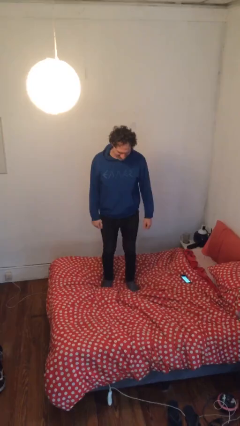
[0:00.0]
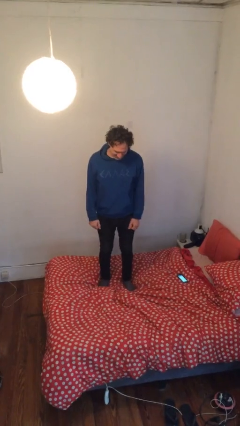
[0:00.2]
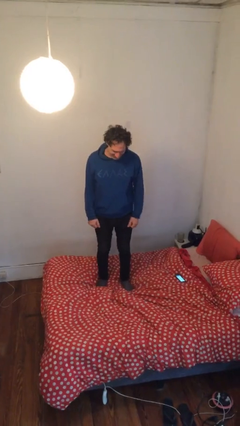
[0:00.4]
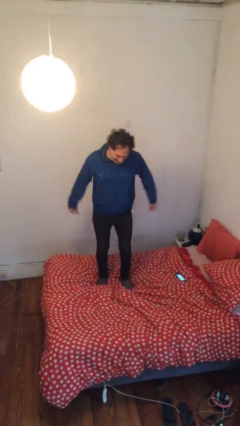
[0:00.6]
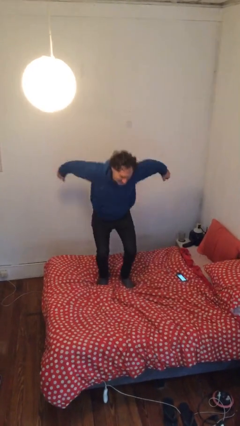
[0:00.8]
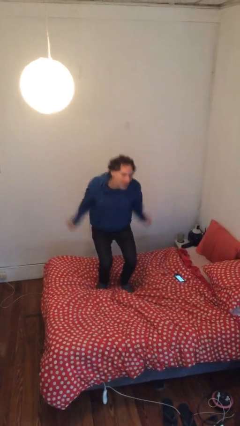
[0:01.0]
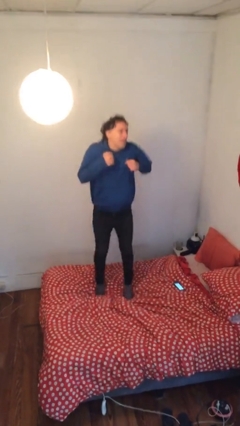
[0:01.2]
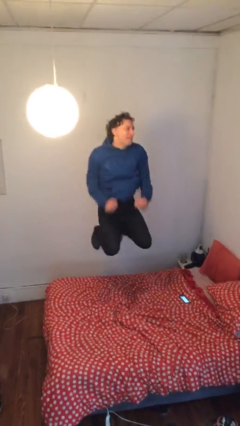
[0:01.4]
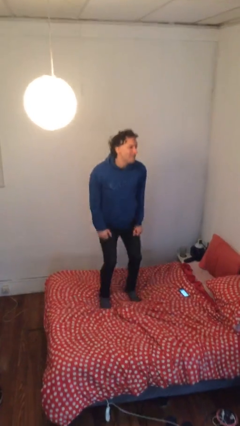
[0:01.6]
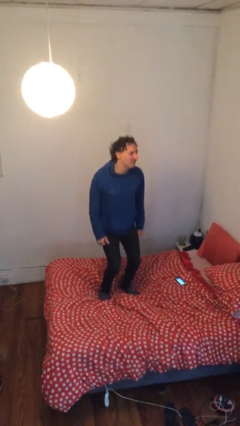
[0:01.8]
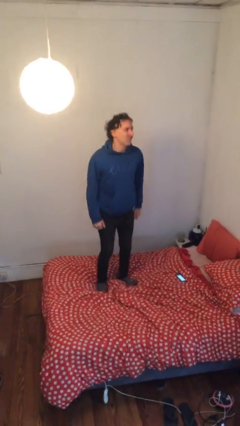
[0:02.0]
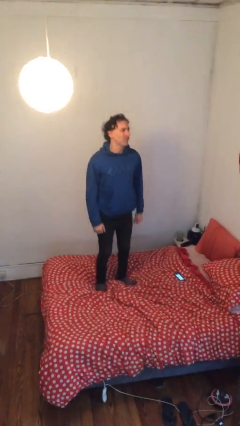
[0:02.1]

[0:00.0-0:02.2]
person jumps on bed

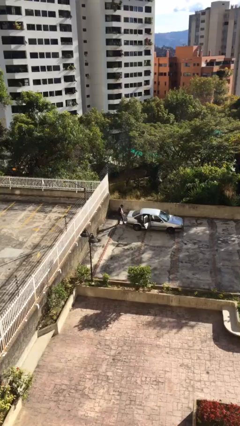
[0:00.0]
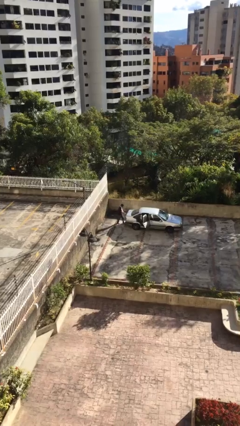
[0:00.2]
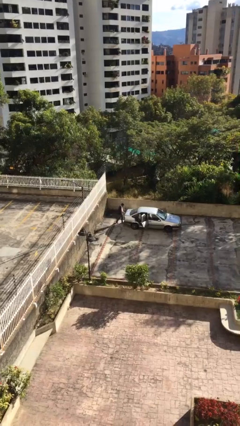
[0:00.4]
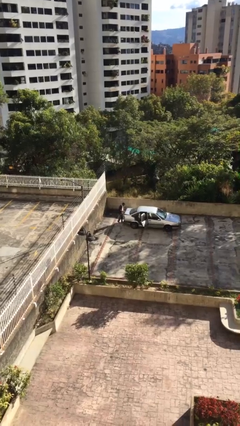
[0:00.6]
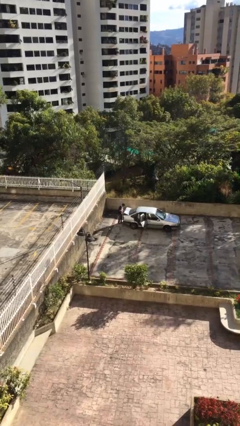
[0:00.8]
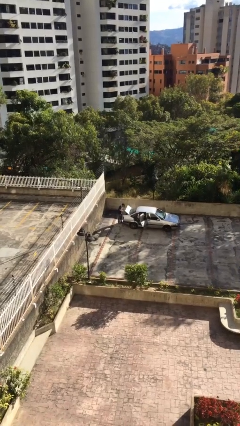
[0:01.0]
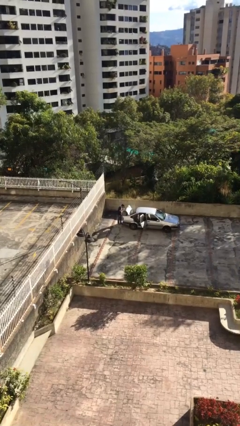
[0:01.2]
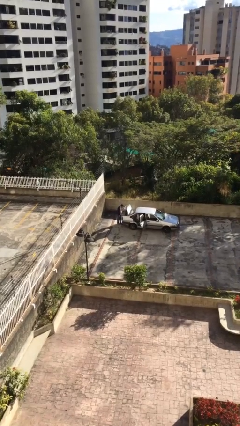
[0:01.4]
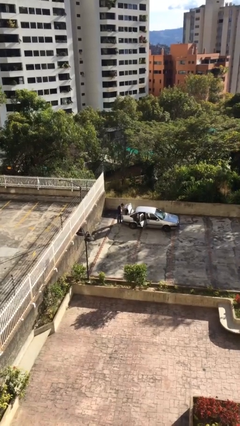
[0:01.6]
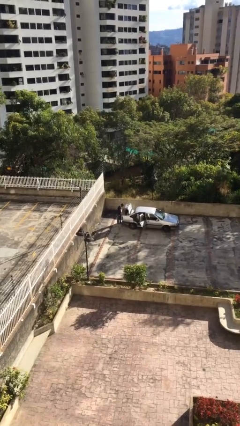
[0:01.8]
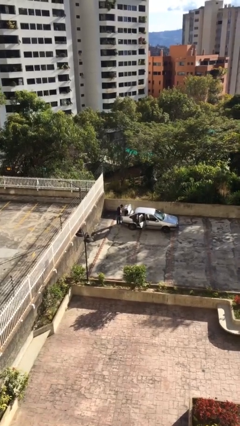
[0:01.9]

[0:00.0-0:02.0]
person opens car trunk

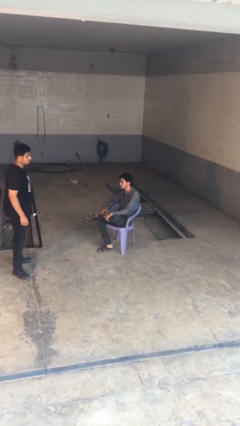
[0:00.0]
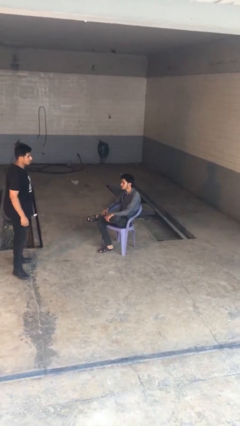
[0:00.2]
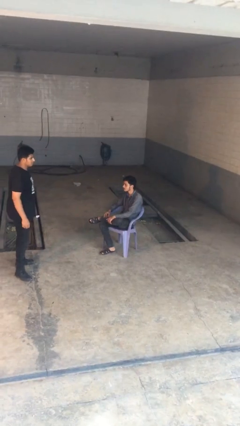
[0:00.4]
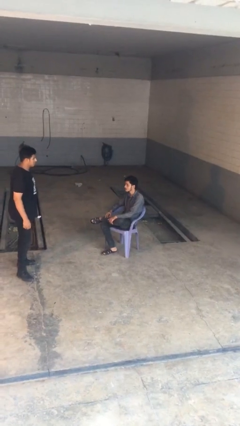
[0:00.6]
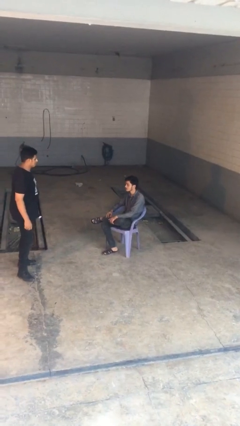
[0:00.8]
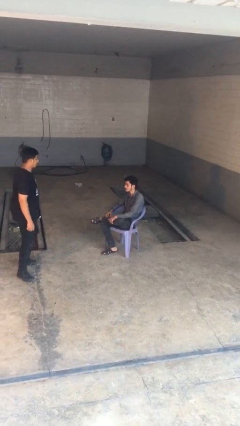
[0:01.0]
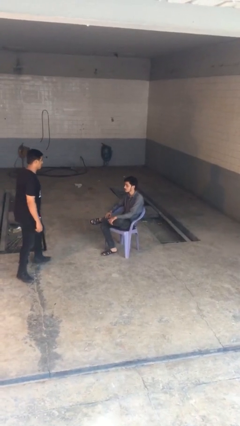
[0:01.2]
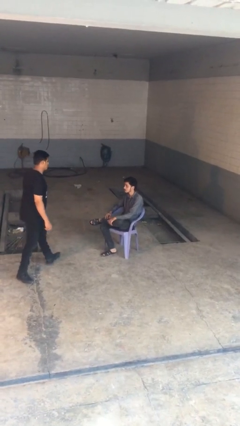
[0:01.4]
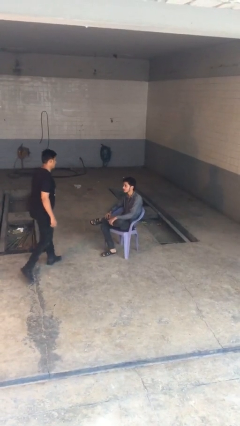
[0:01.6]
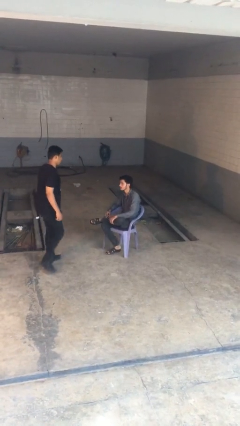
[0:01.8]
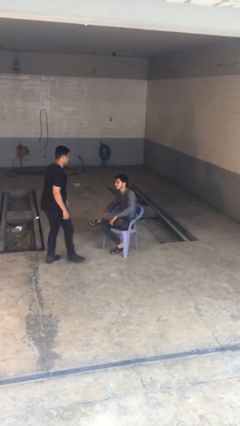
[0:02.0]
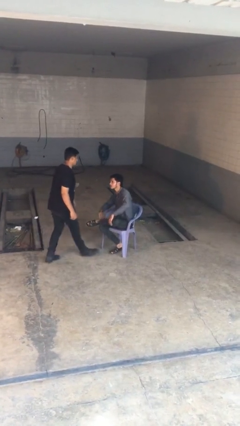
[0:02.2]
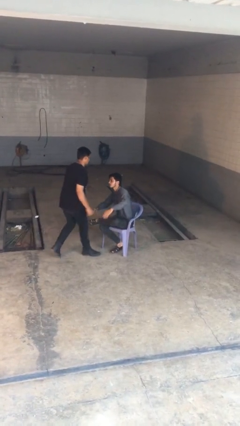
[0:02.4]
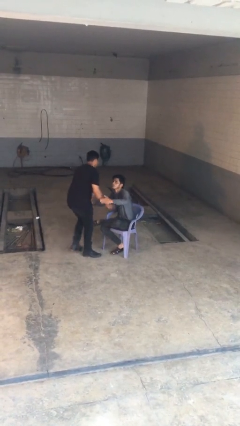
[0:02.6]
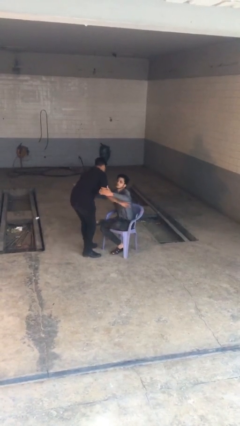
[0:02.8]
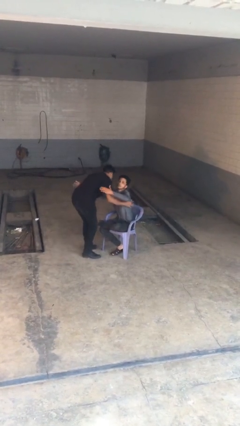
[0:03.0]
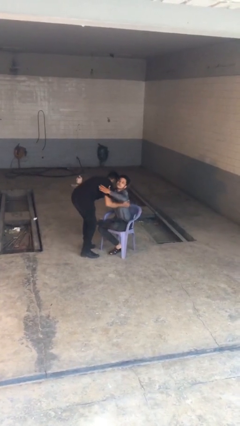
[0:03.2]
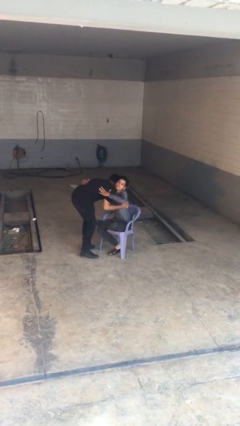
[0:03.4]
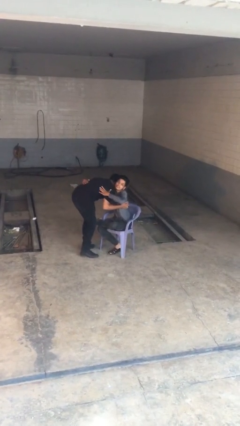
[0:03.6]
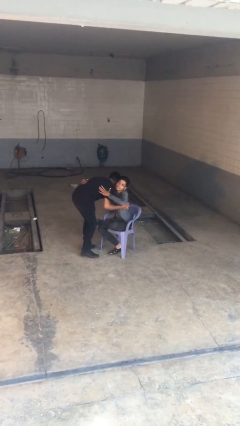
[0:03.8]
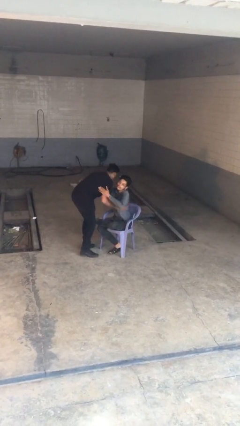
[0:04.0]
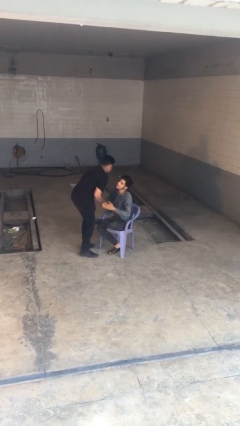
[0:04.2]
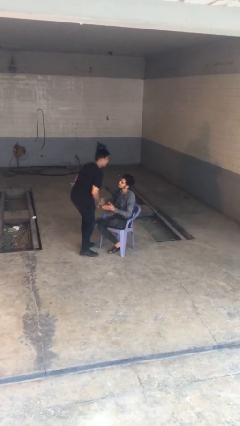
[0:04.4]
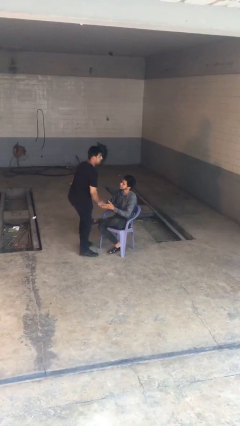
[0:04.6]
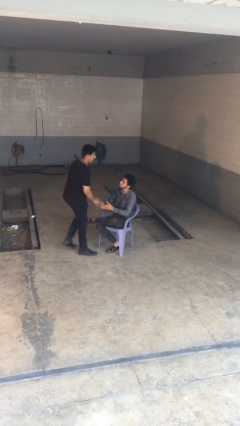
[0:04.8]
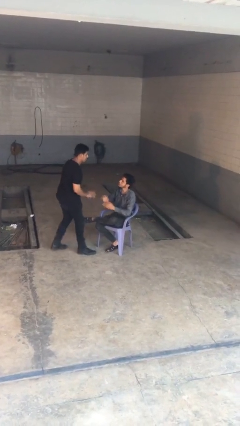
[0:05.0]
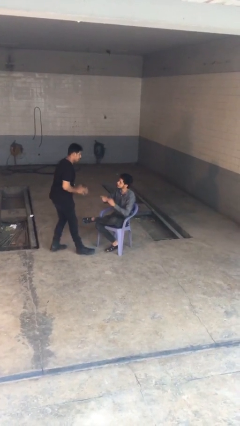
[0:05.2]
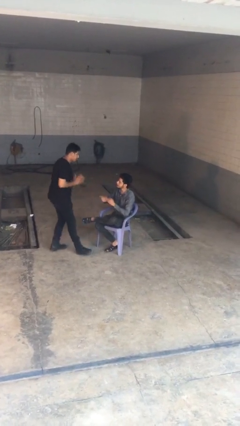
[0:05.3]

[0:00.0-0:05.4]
person embraces person

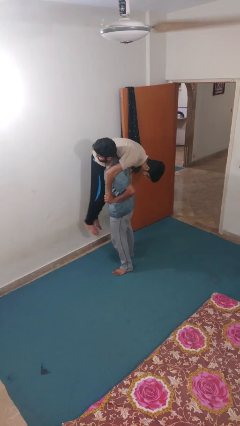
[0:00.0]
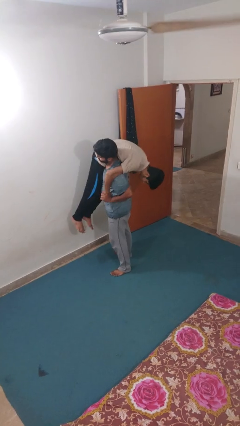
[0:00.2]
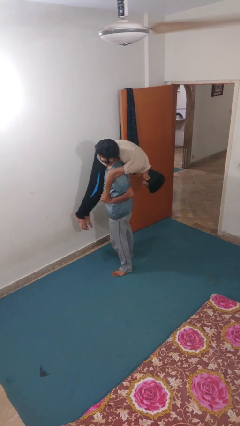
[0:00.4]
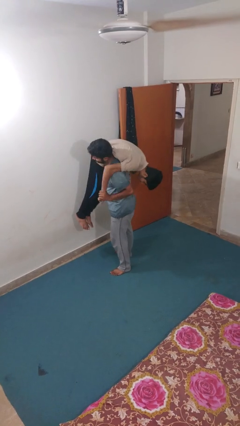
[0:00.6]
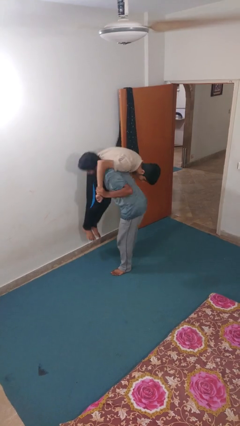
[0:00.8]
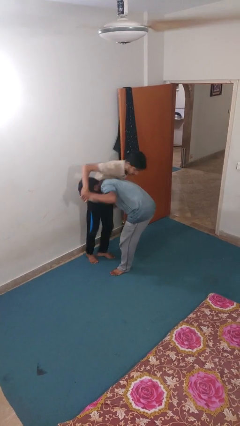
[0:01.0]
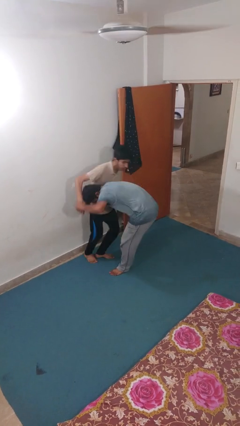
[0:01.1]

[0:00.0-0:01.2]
person puts down person

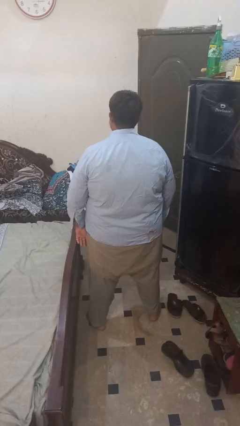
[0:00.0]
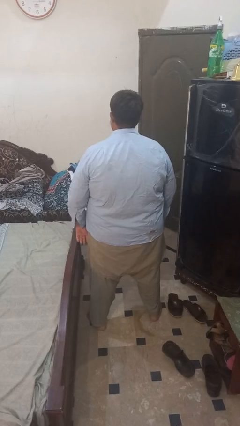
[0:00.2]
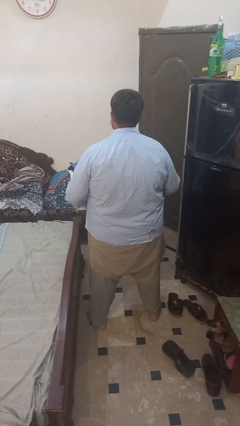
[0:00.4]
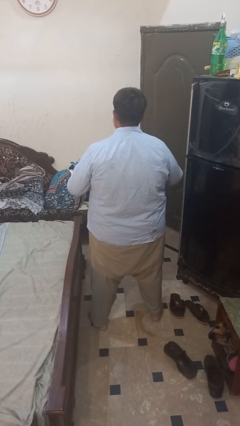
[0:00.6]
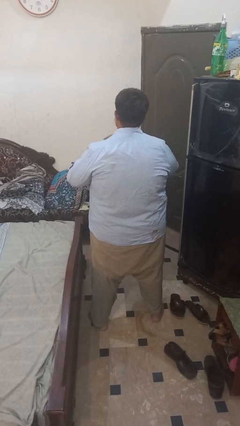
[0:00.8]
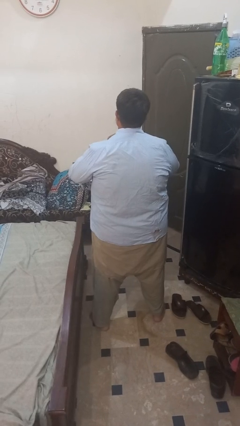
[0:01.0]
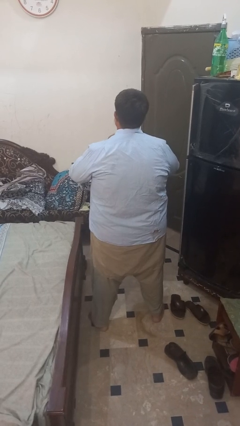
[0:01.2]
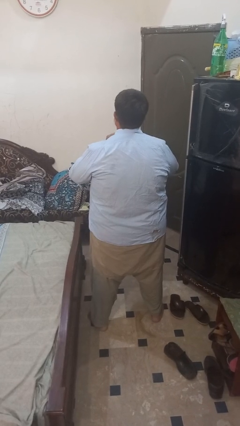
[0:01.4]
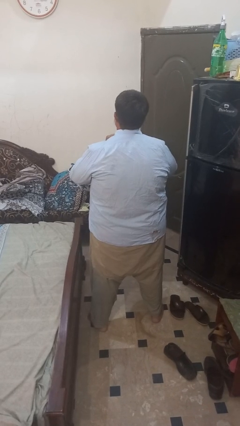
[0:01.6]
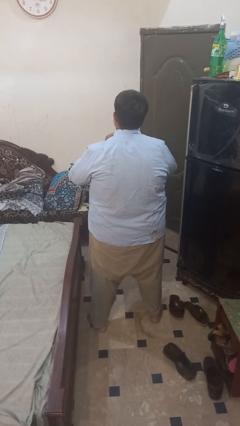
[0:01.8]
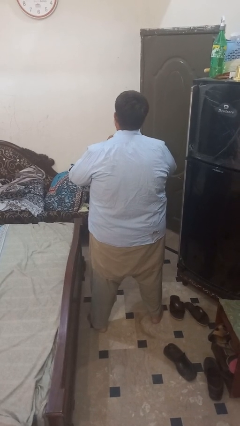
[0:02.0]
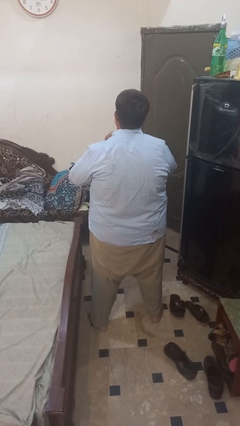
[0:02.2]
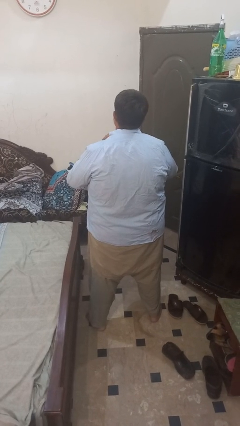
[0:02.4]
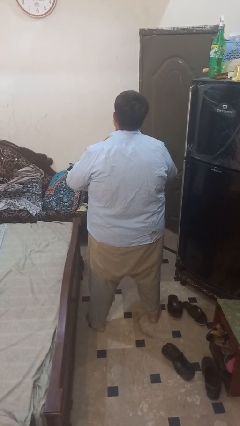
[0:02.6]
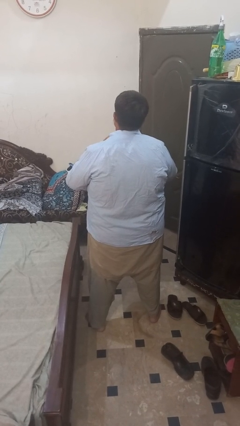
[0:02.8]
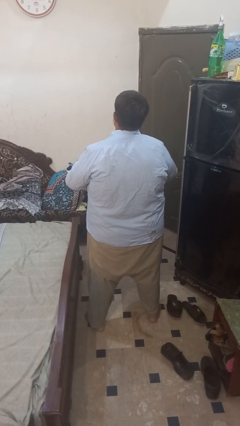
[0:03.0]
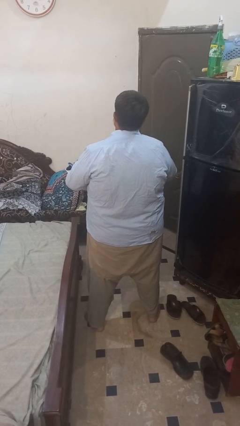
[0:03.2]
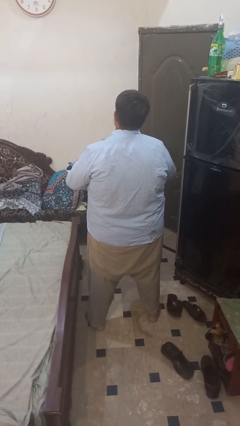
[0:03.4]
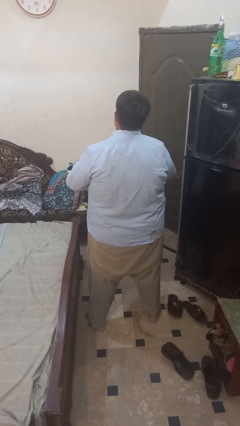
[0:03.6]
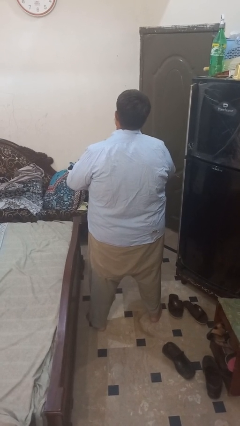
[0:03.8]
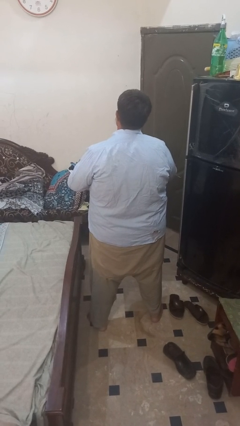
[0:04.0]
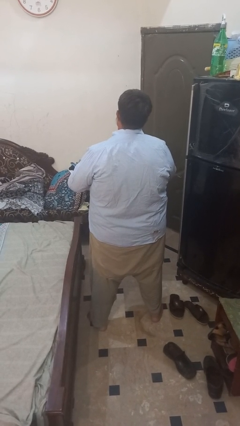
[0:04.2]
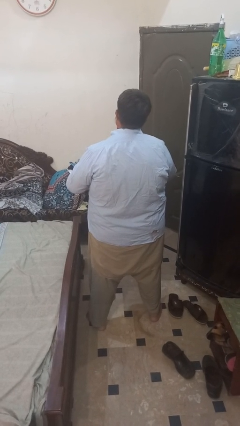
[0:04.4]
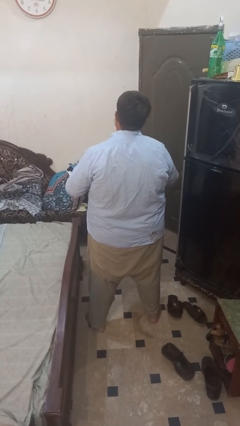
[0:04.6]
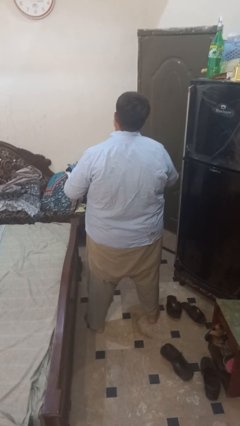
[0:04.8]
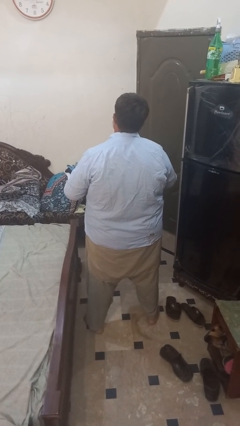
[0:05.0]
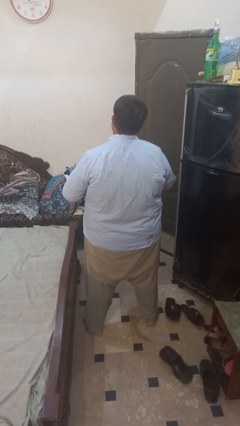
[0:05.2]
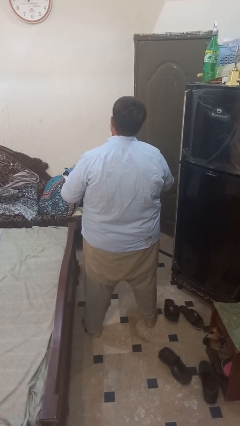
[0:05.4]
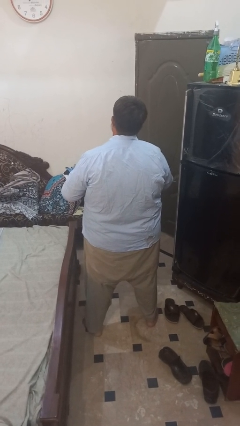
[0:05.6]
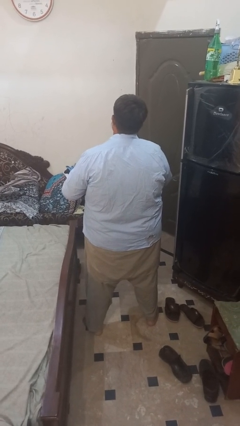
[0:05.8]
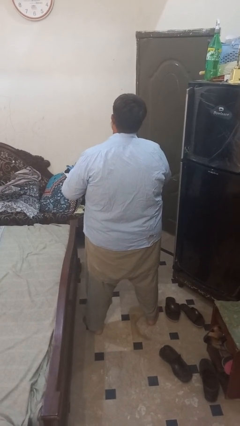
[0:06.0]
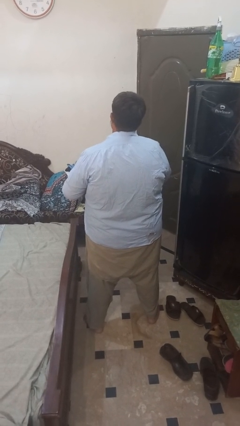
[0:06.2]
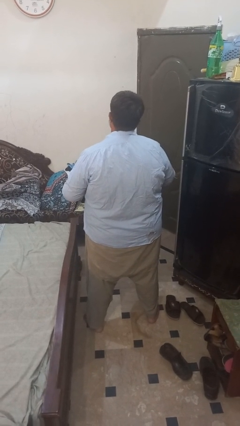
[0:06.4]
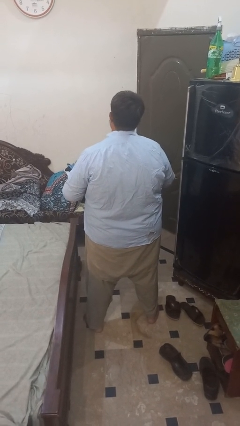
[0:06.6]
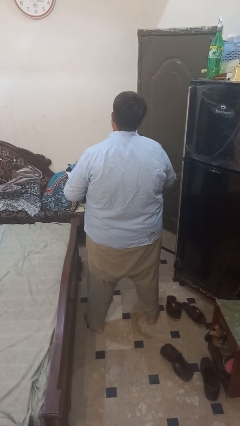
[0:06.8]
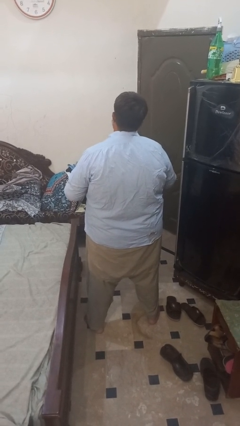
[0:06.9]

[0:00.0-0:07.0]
person unbuttons shirt
